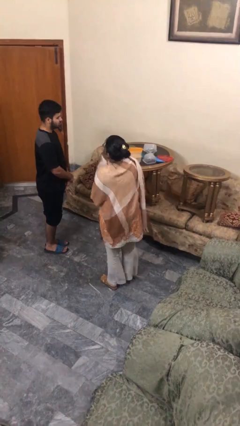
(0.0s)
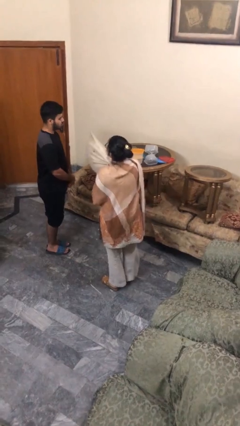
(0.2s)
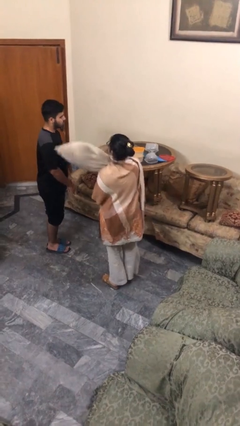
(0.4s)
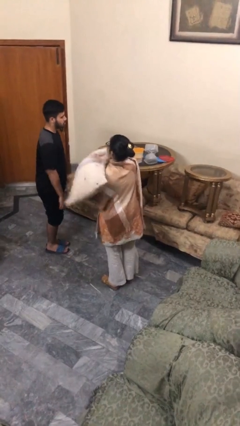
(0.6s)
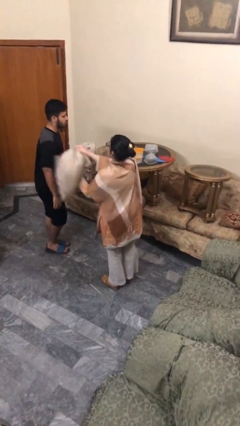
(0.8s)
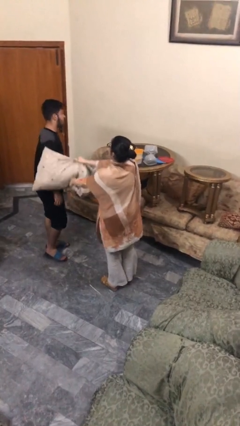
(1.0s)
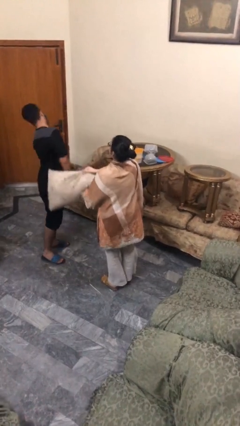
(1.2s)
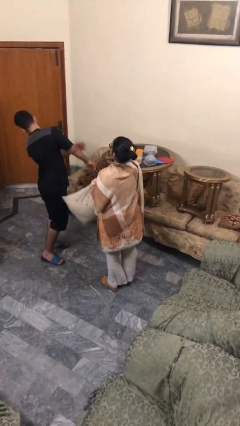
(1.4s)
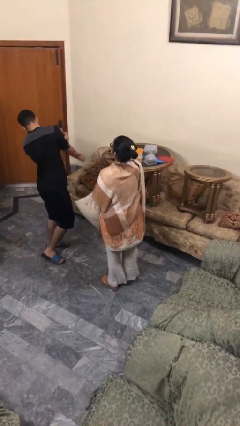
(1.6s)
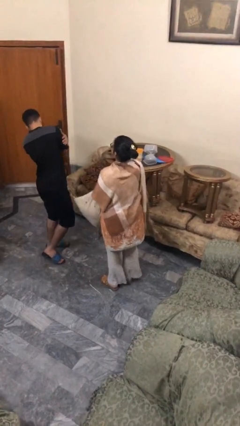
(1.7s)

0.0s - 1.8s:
person hits person with pillow

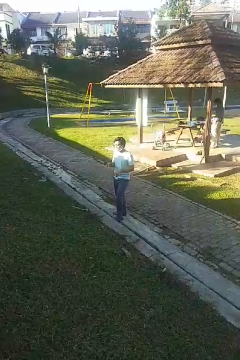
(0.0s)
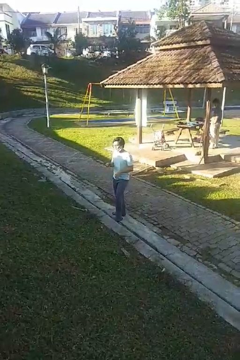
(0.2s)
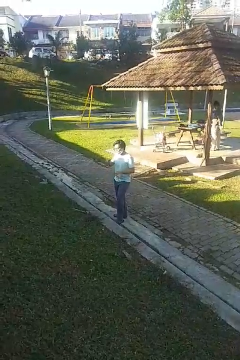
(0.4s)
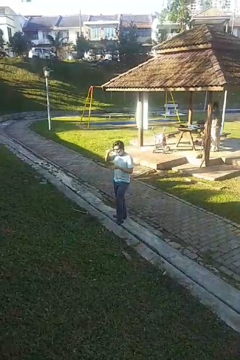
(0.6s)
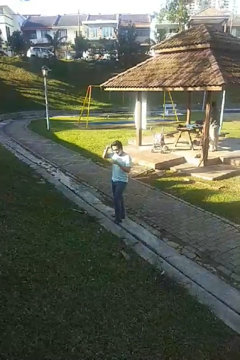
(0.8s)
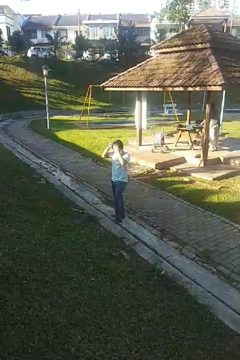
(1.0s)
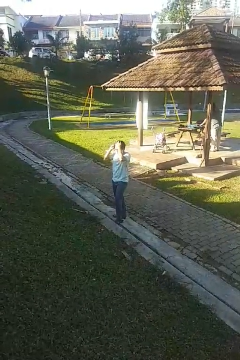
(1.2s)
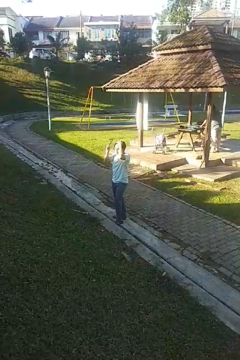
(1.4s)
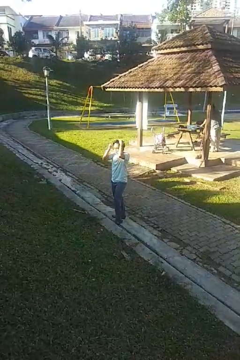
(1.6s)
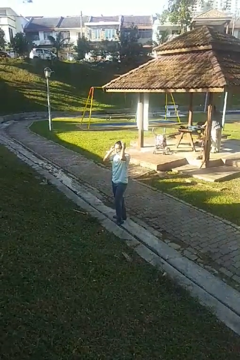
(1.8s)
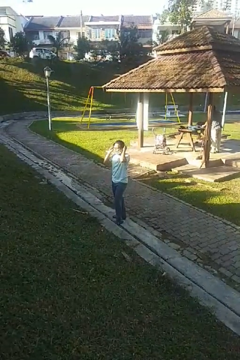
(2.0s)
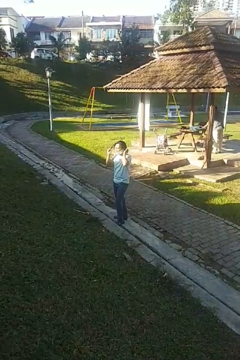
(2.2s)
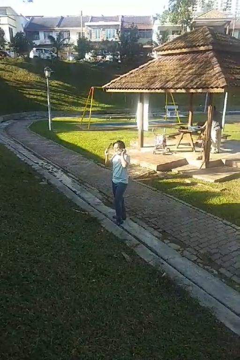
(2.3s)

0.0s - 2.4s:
person brushes hair

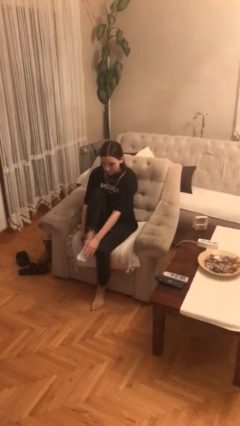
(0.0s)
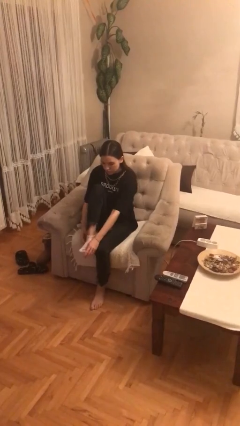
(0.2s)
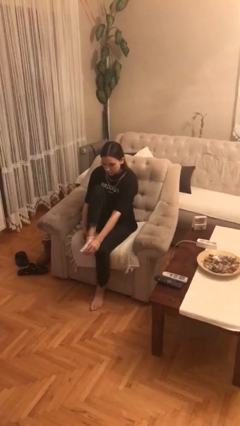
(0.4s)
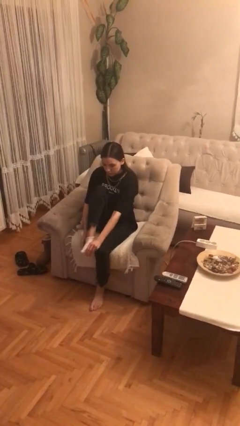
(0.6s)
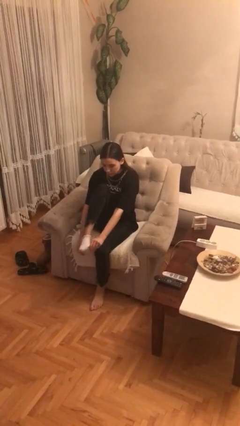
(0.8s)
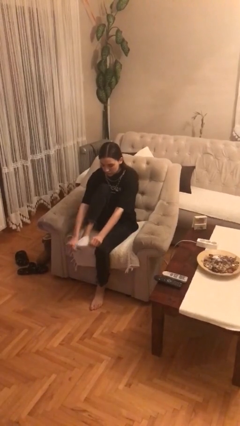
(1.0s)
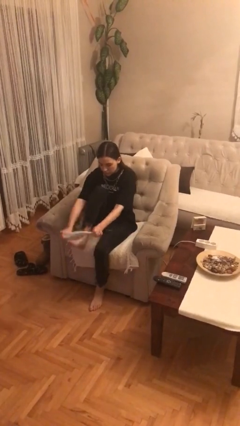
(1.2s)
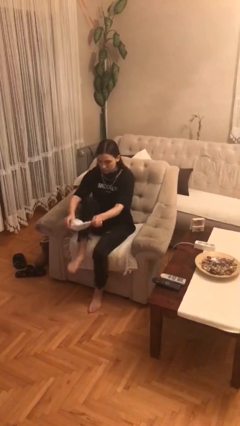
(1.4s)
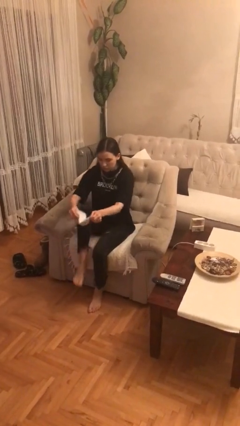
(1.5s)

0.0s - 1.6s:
person takes off socks

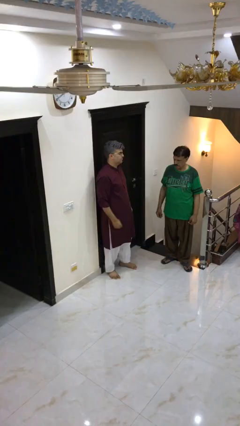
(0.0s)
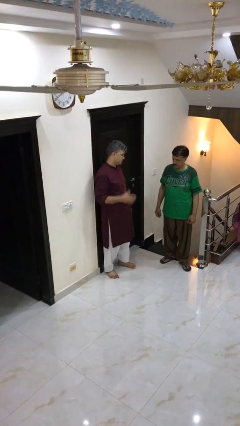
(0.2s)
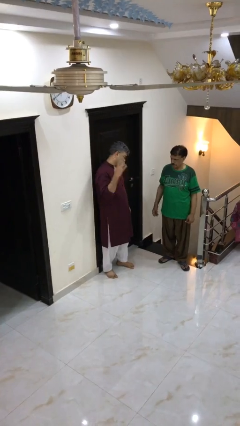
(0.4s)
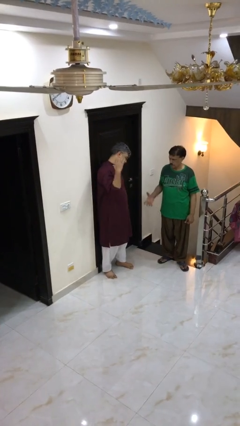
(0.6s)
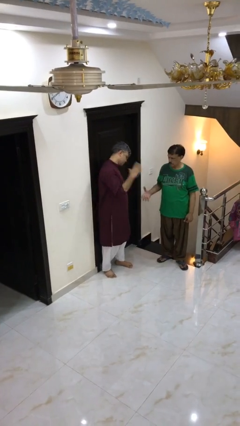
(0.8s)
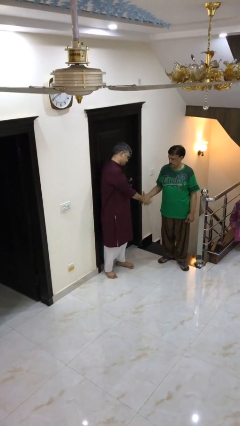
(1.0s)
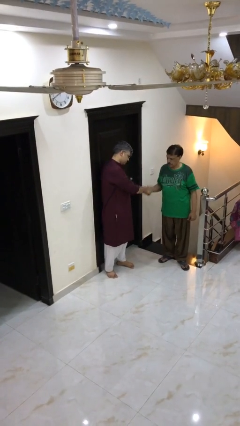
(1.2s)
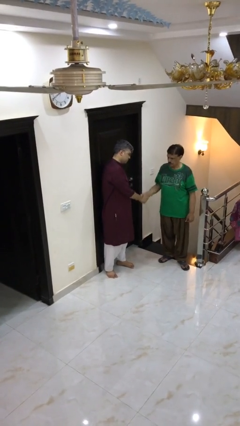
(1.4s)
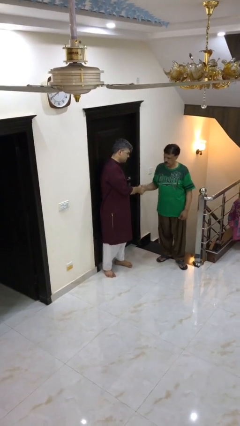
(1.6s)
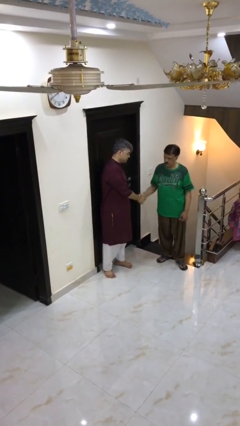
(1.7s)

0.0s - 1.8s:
person shakes hand

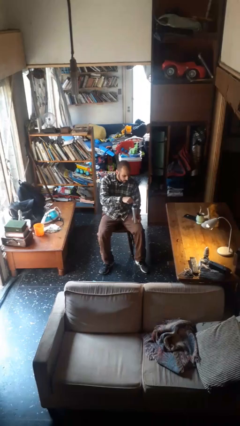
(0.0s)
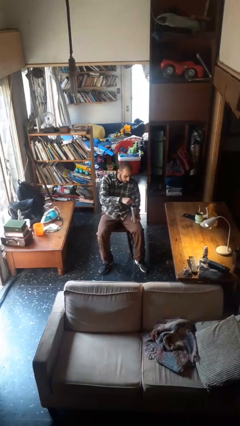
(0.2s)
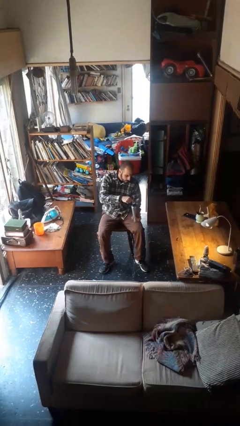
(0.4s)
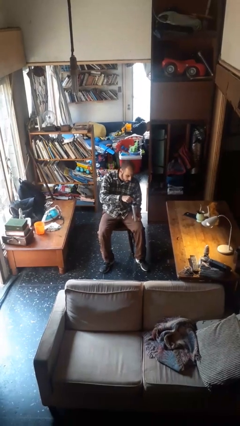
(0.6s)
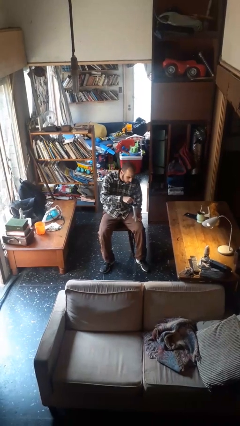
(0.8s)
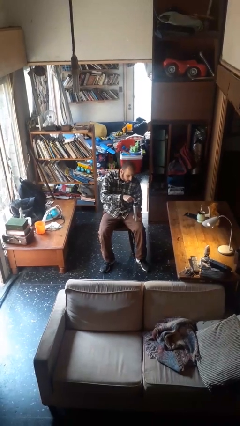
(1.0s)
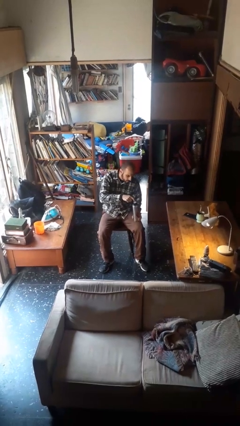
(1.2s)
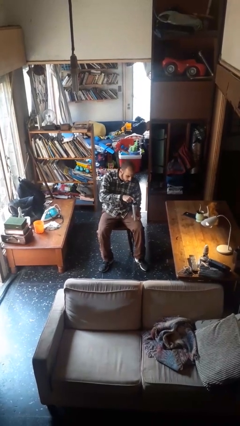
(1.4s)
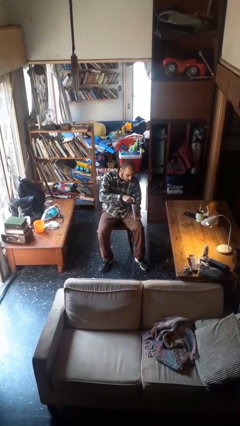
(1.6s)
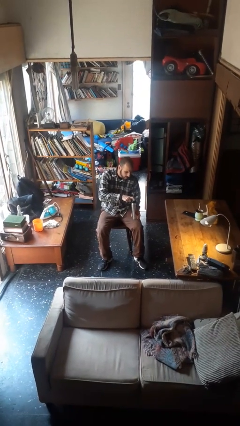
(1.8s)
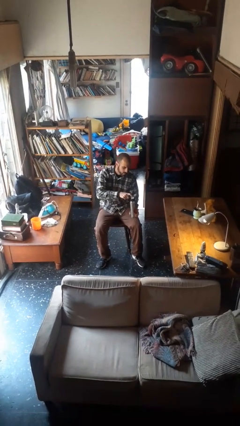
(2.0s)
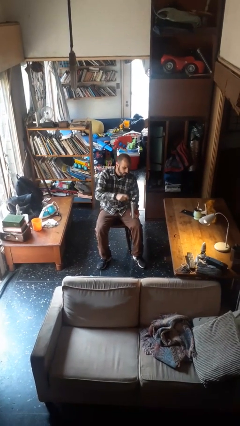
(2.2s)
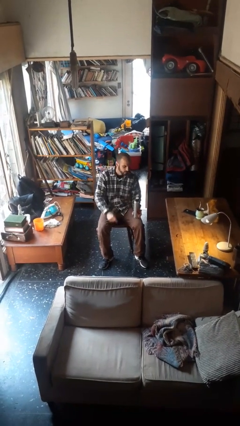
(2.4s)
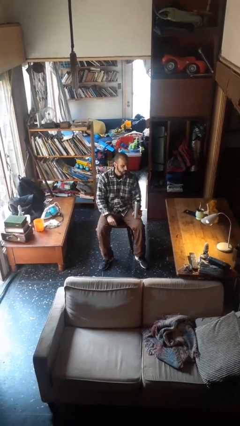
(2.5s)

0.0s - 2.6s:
person taps object with finger

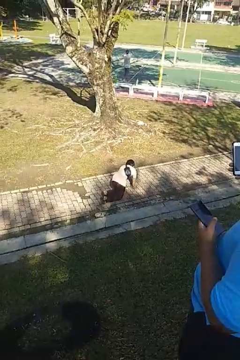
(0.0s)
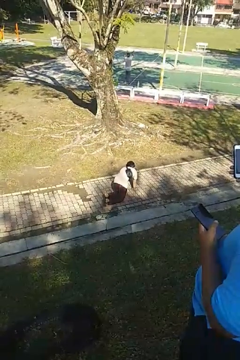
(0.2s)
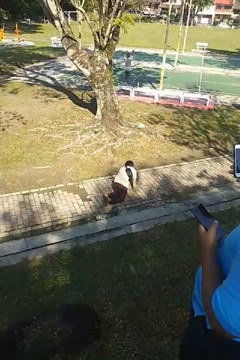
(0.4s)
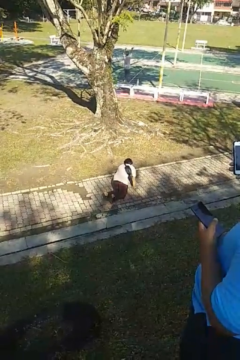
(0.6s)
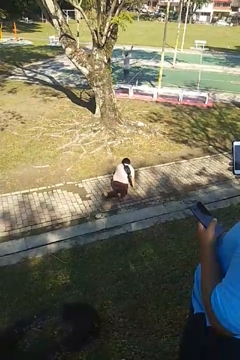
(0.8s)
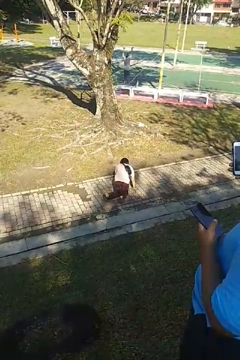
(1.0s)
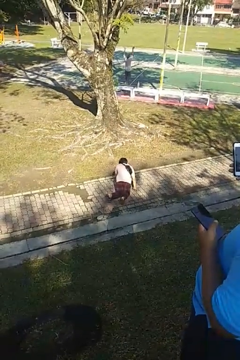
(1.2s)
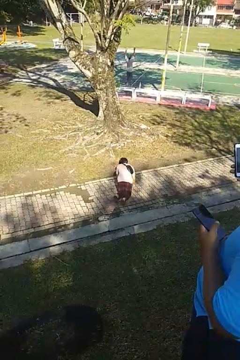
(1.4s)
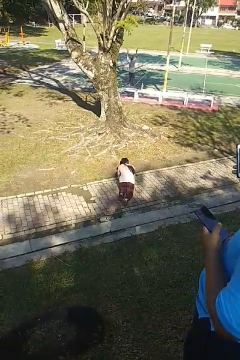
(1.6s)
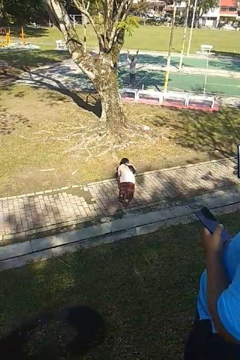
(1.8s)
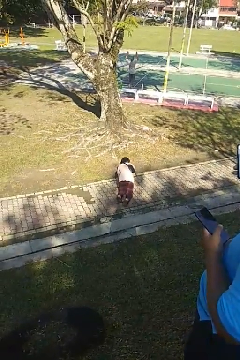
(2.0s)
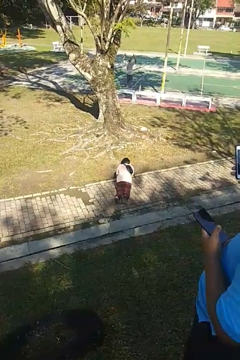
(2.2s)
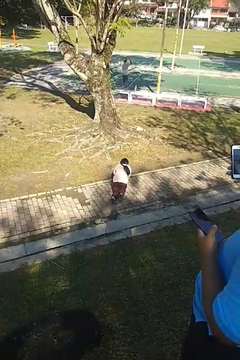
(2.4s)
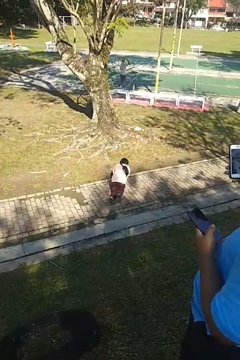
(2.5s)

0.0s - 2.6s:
person crawls

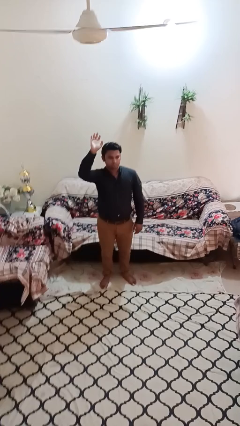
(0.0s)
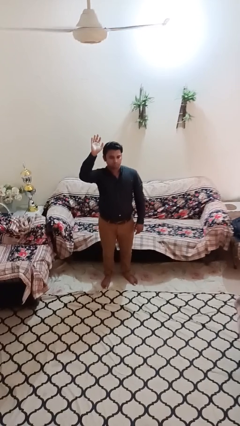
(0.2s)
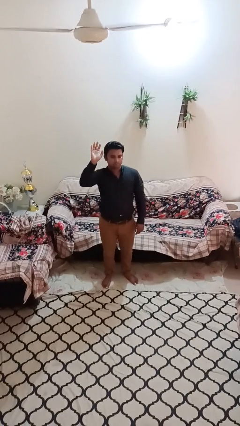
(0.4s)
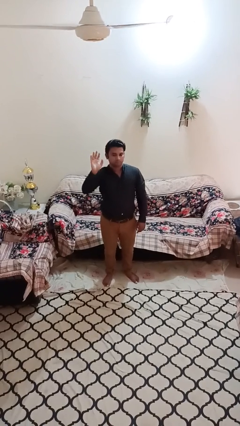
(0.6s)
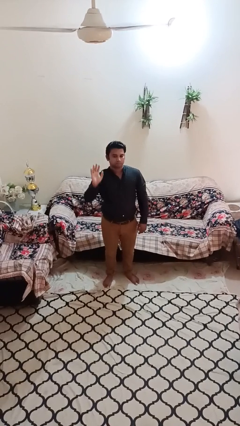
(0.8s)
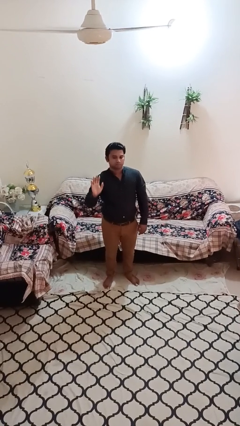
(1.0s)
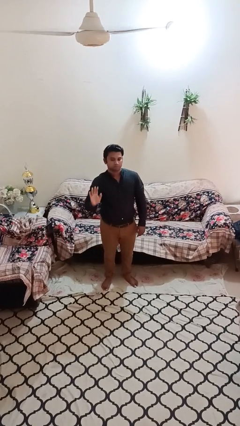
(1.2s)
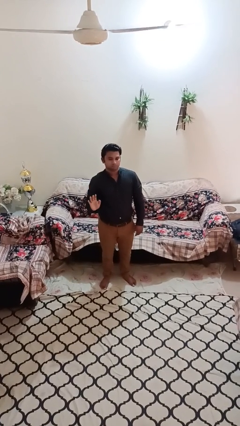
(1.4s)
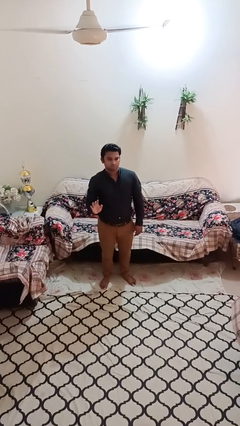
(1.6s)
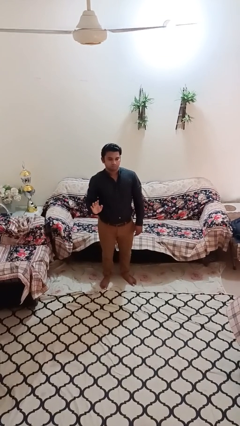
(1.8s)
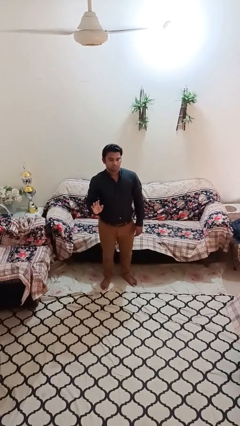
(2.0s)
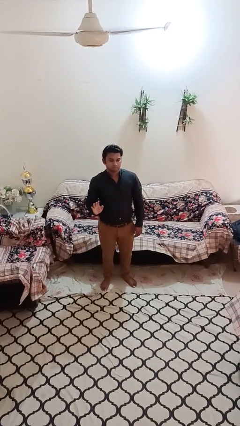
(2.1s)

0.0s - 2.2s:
person gestures lower hand

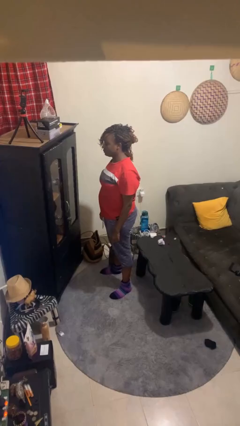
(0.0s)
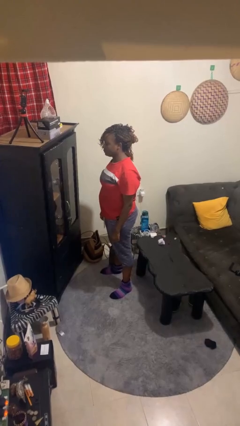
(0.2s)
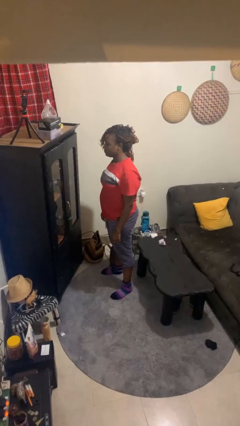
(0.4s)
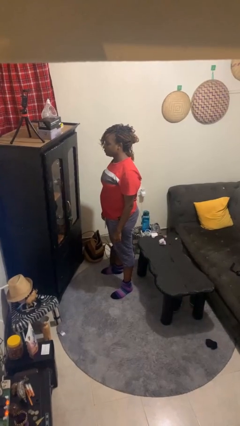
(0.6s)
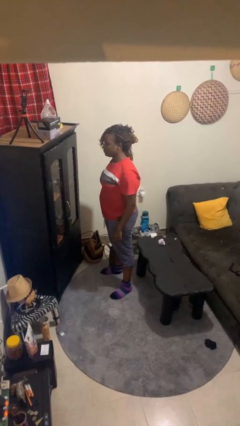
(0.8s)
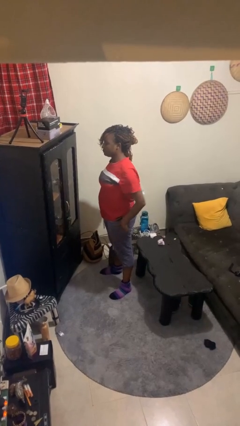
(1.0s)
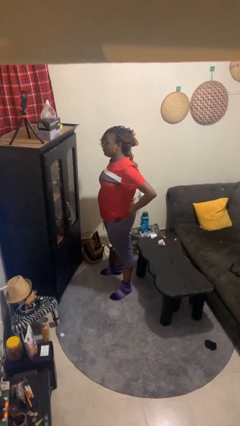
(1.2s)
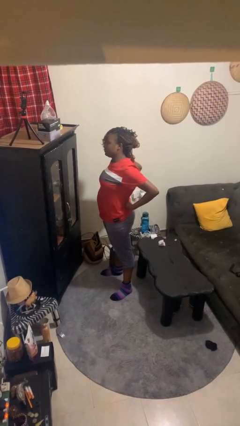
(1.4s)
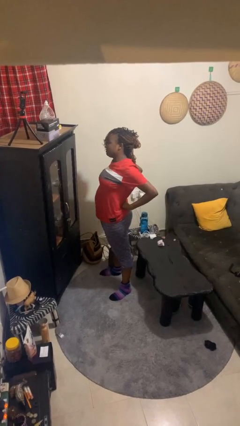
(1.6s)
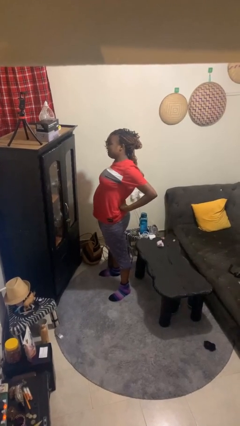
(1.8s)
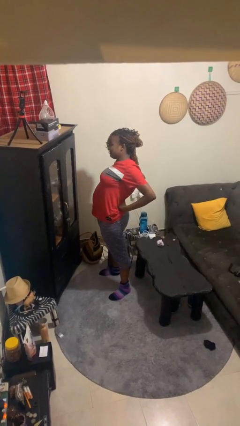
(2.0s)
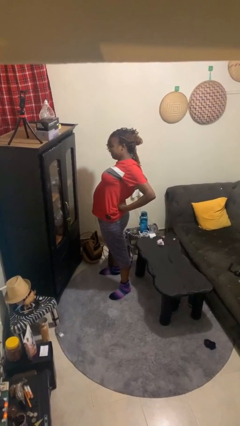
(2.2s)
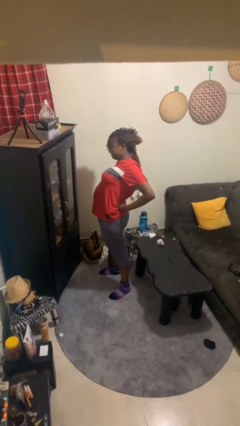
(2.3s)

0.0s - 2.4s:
person stretches back

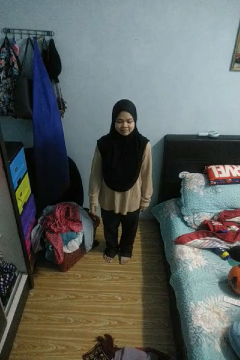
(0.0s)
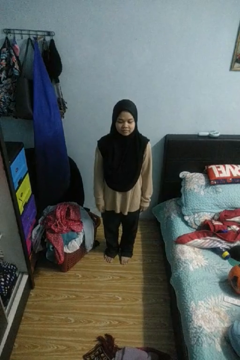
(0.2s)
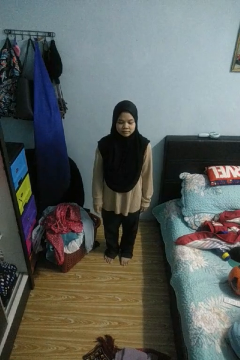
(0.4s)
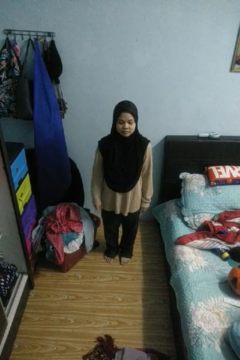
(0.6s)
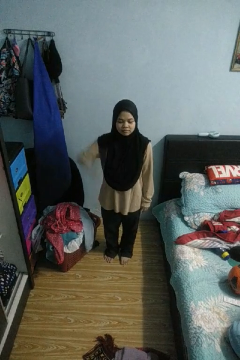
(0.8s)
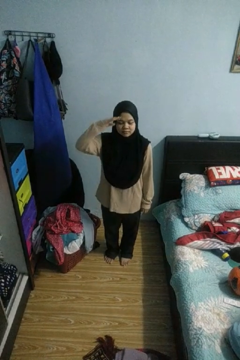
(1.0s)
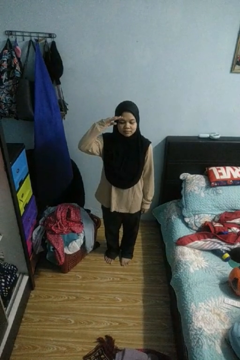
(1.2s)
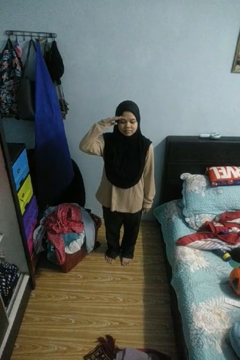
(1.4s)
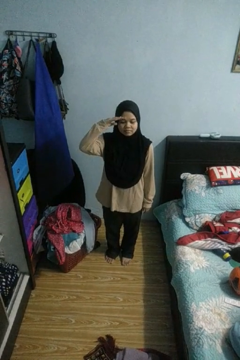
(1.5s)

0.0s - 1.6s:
person salutes
